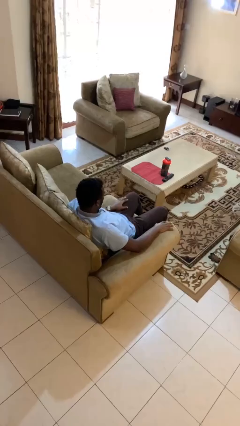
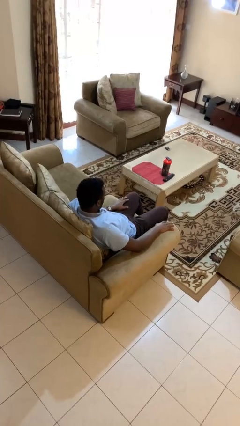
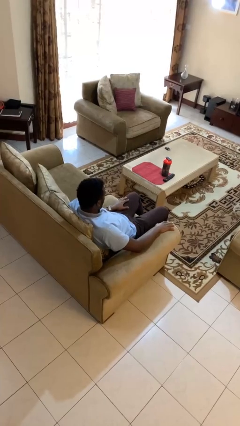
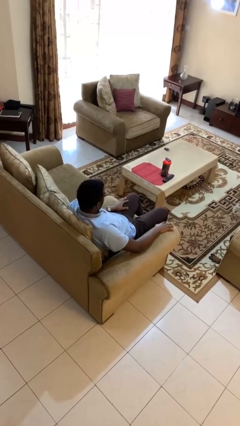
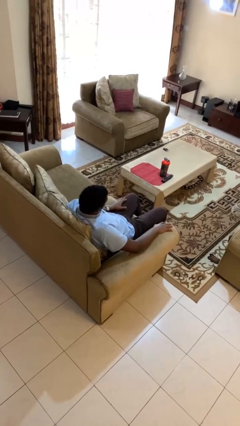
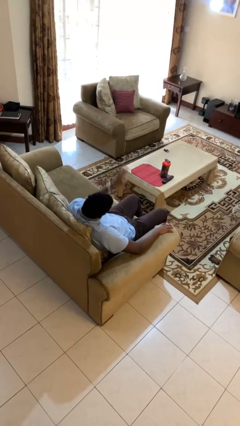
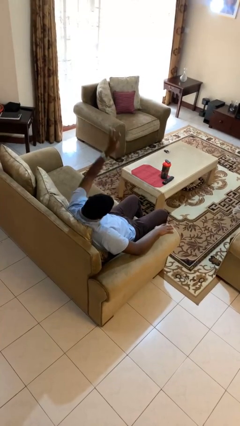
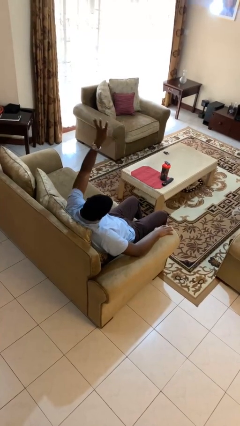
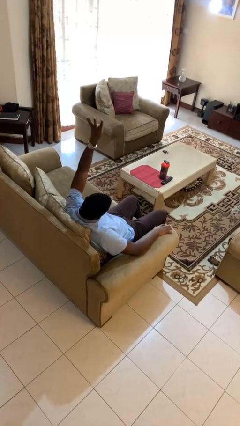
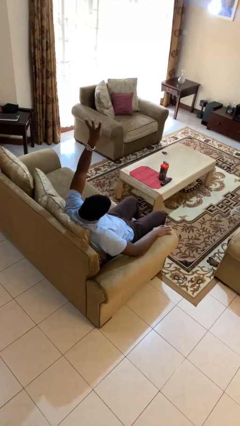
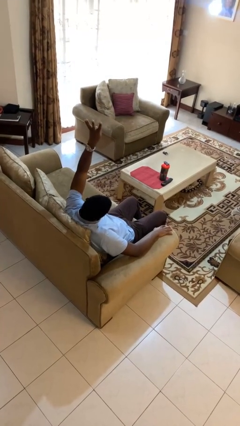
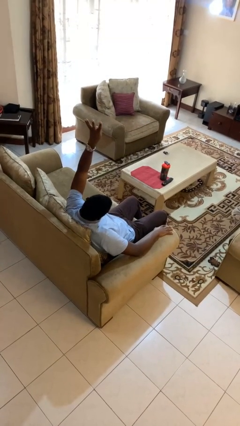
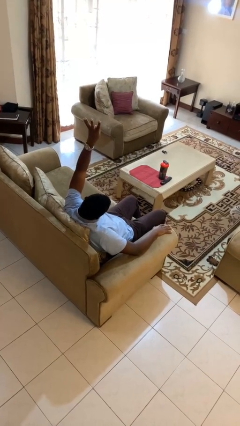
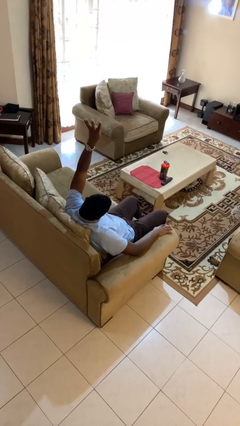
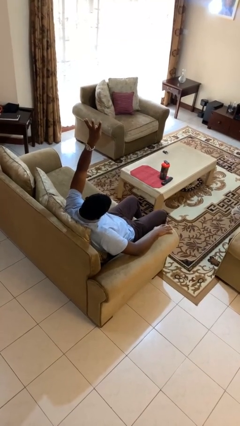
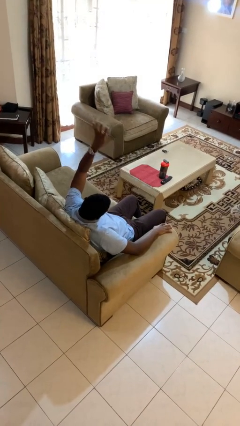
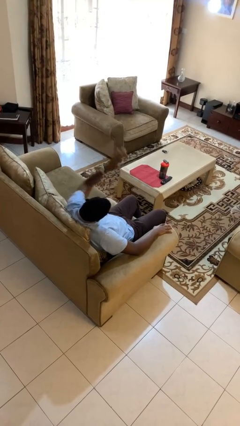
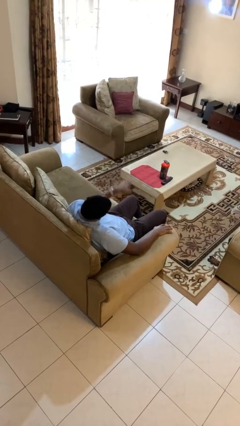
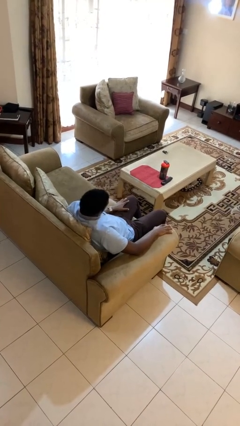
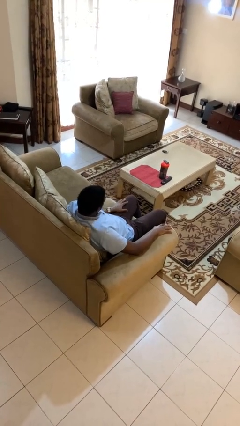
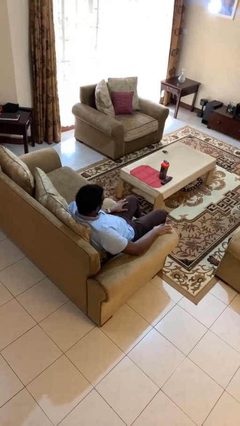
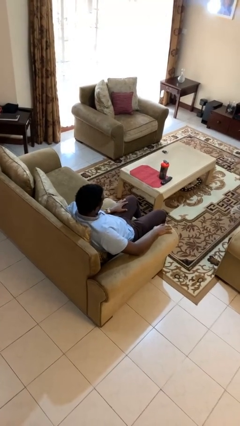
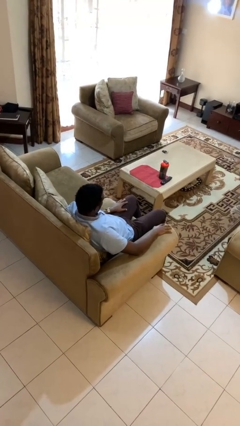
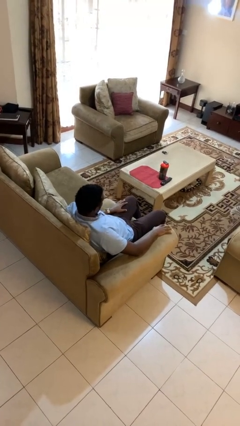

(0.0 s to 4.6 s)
person gestures number four

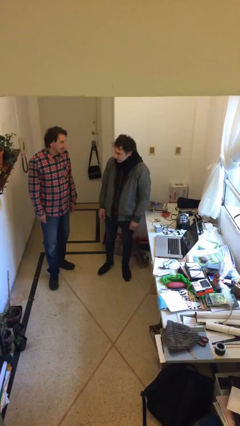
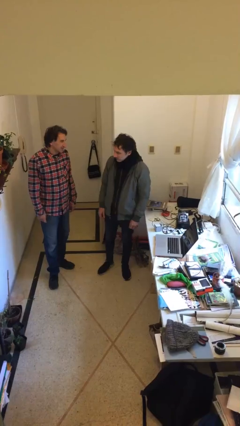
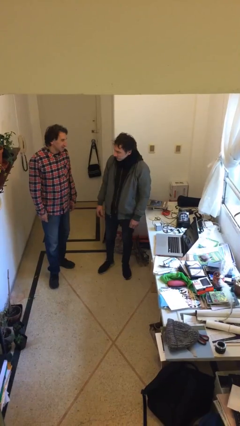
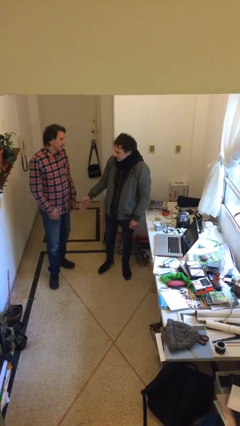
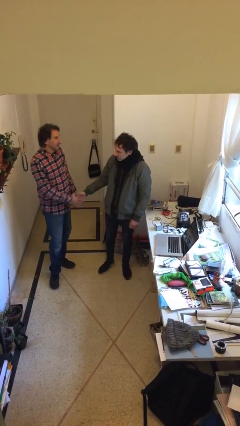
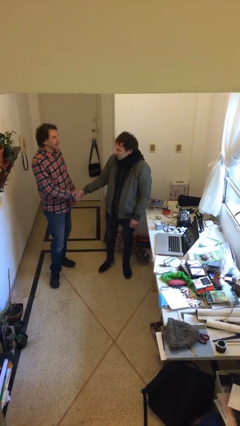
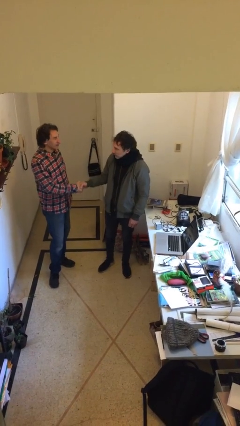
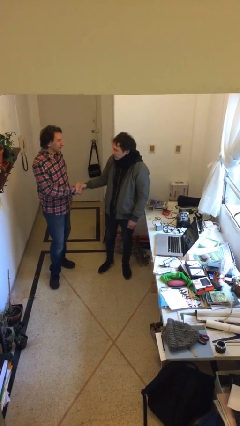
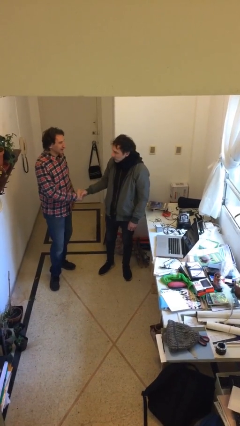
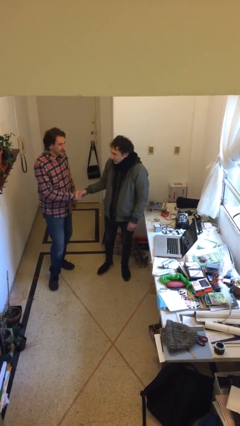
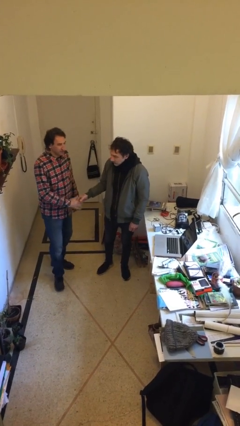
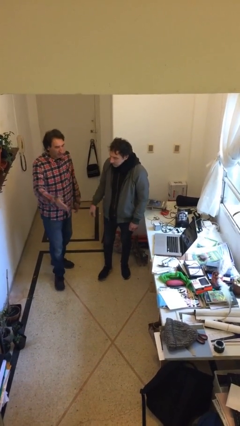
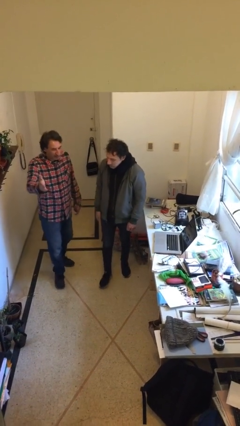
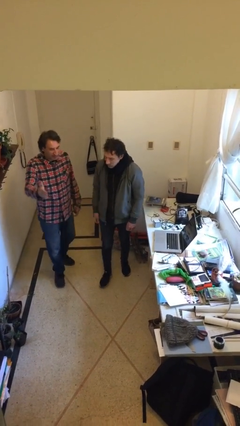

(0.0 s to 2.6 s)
person shakes hand

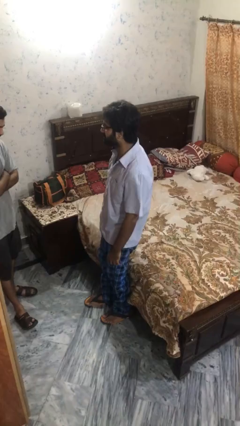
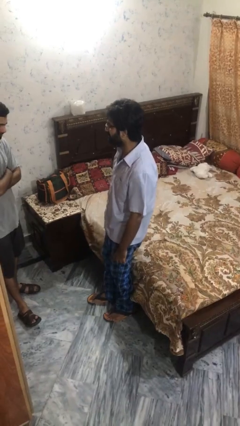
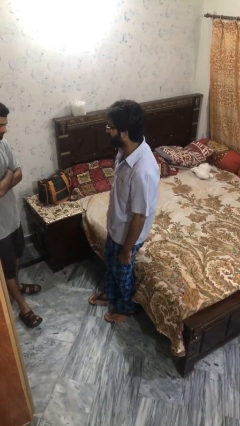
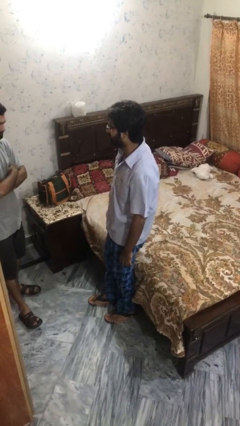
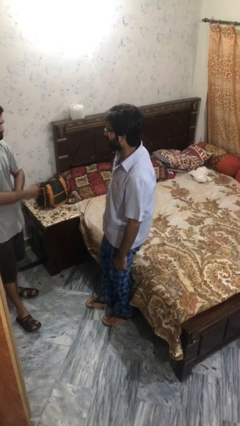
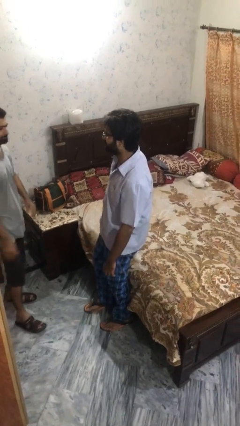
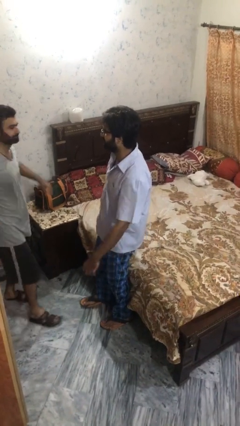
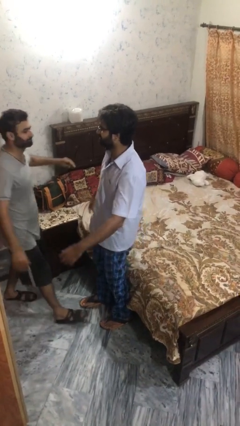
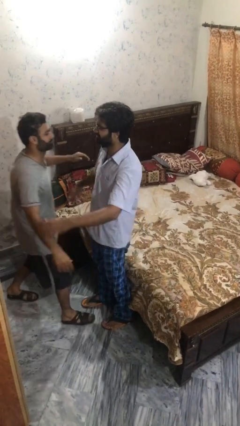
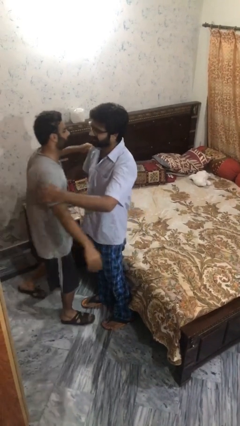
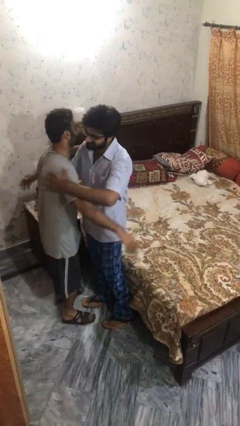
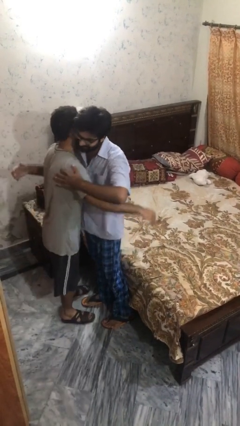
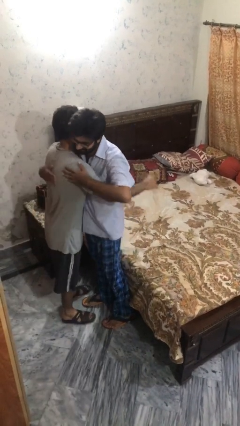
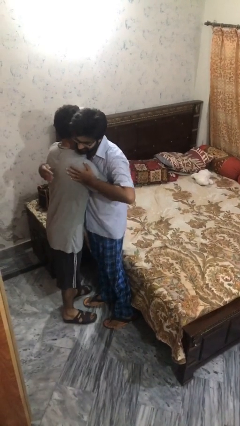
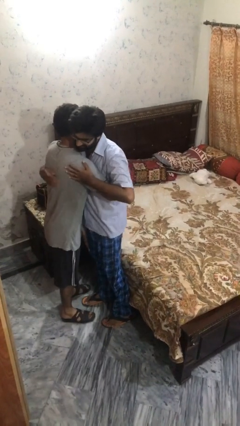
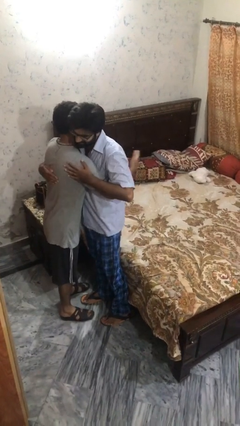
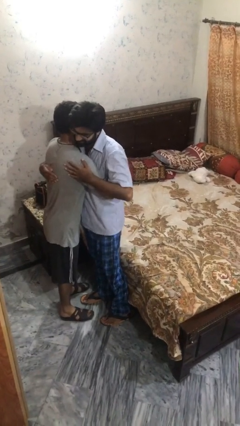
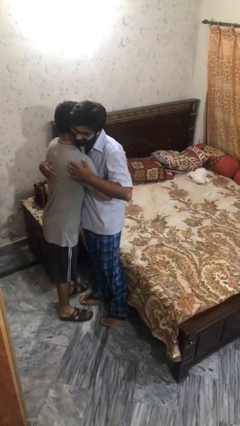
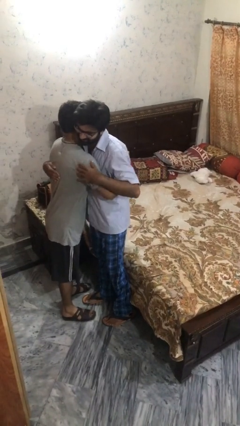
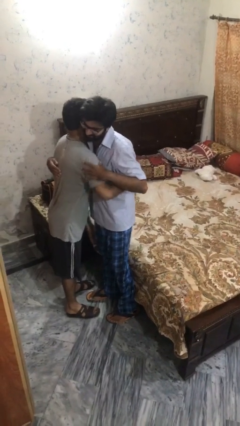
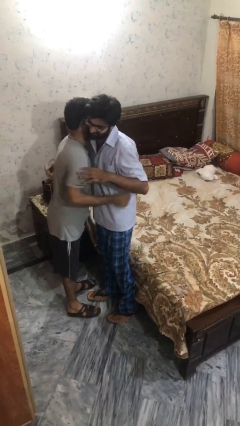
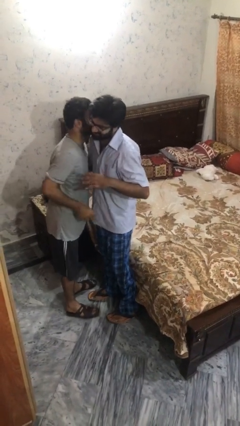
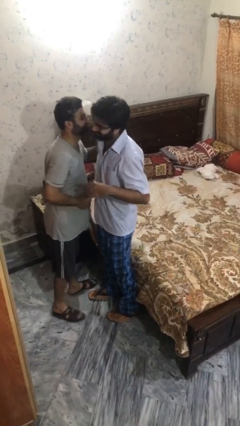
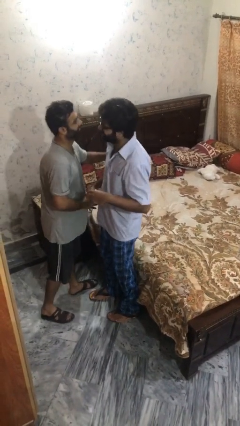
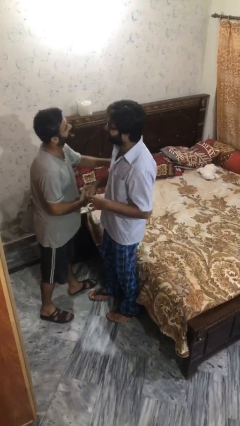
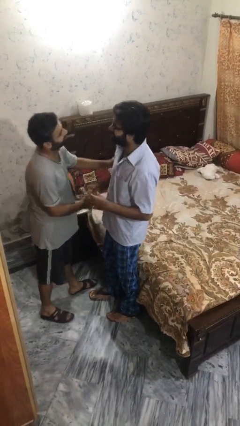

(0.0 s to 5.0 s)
person embraces person

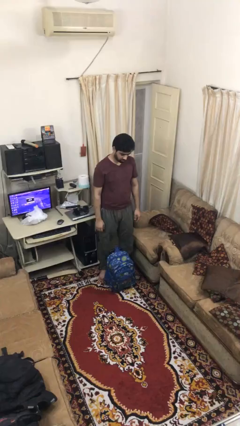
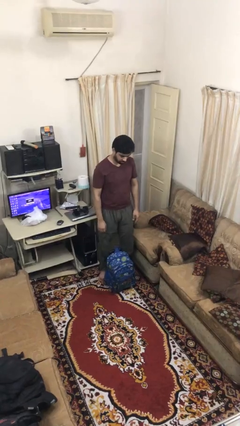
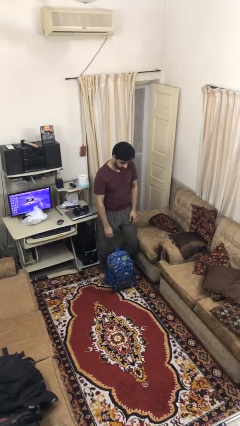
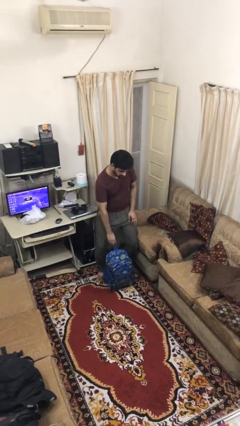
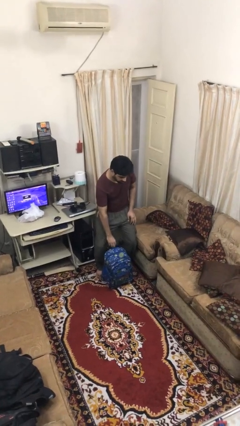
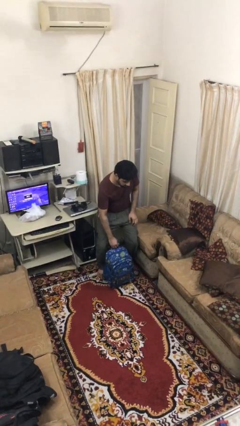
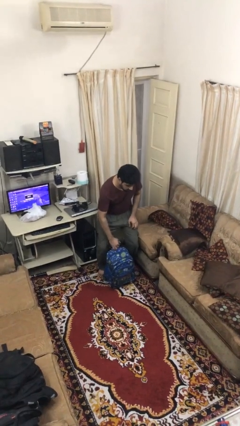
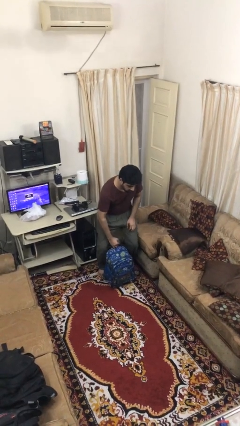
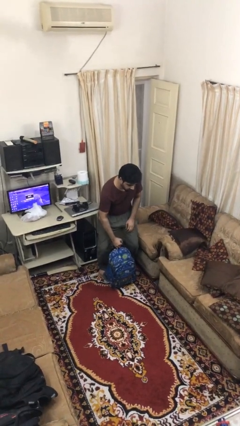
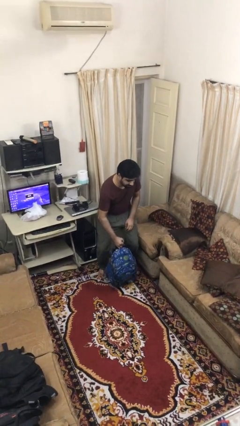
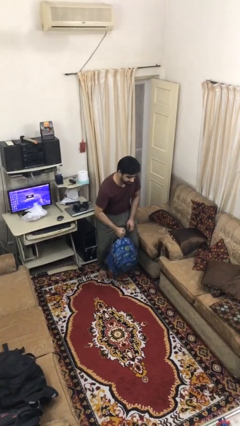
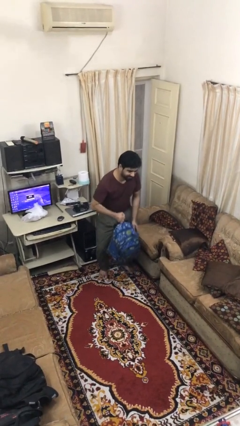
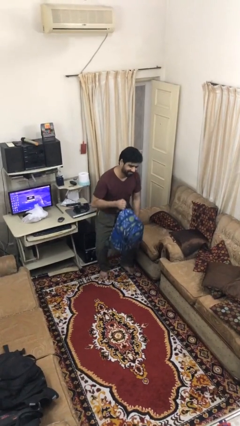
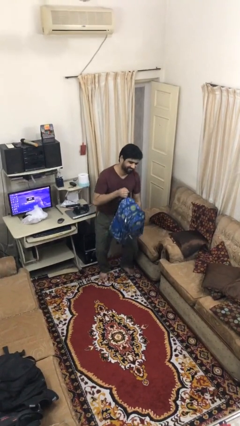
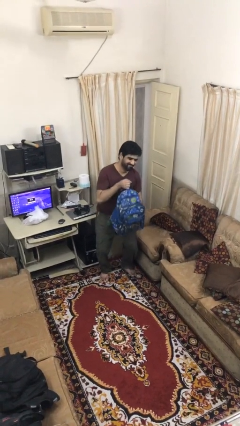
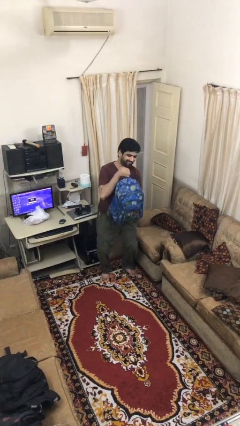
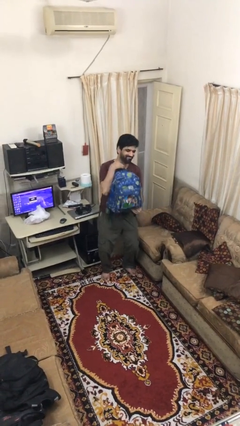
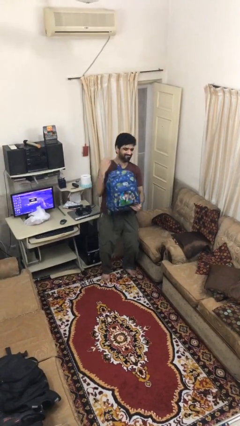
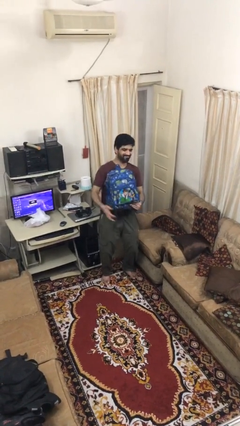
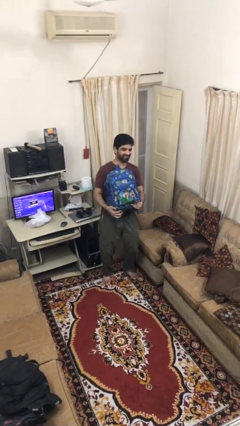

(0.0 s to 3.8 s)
person picks up object from floor

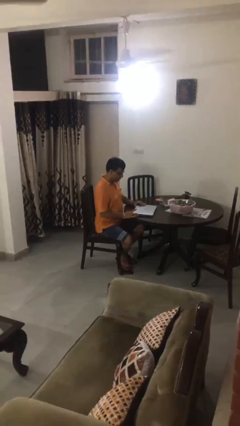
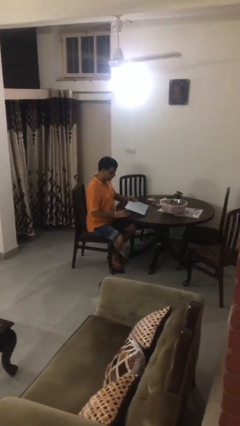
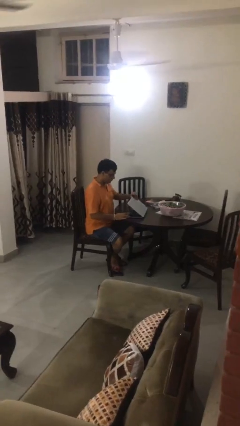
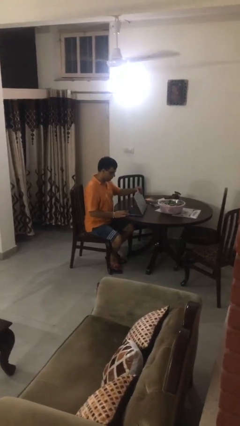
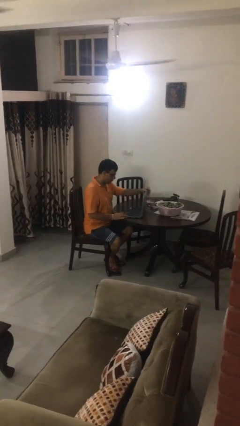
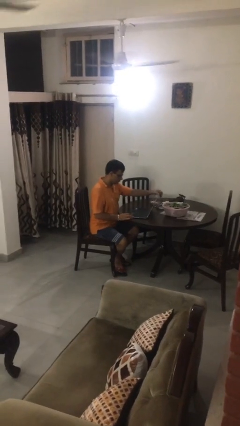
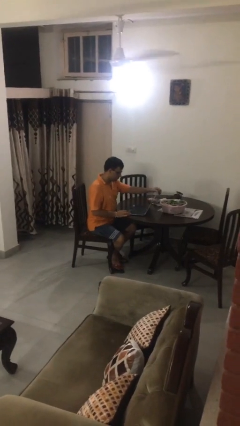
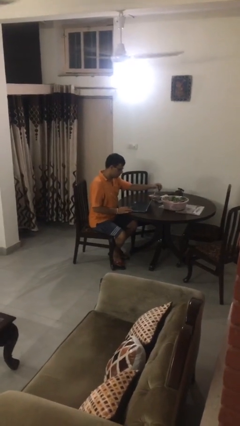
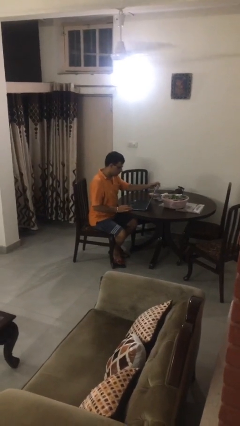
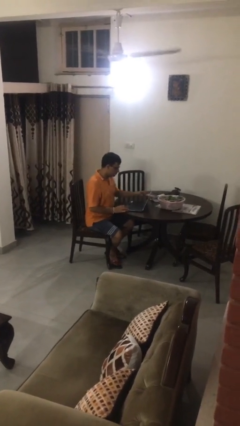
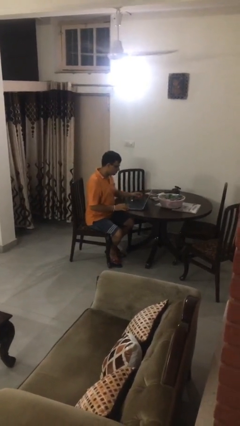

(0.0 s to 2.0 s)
person opens laptop
